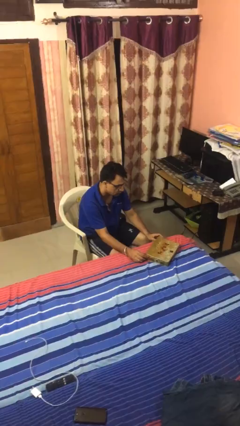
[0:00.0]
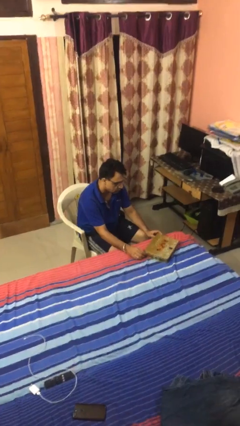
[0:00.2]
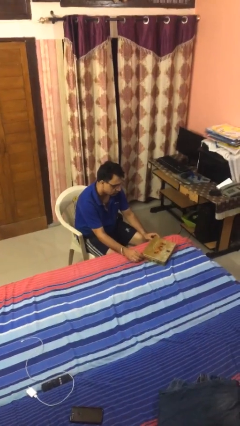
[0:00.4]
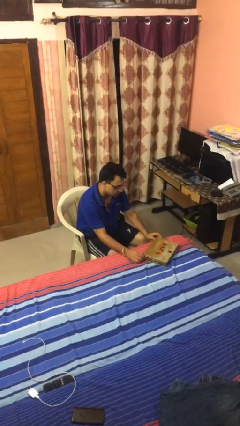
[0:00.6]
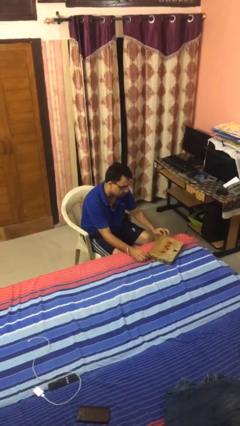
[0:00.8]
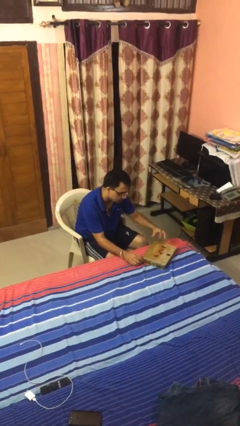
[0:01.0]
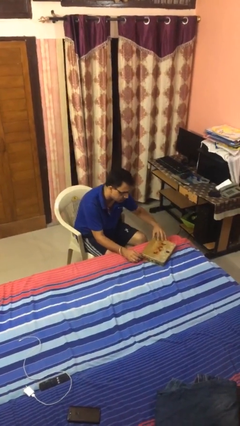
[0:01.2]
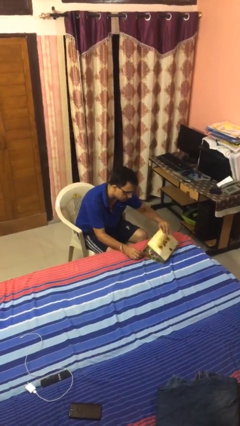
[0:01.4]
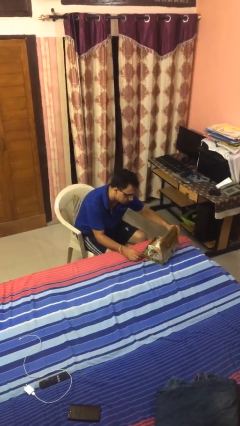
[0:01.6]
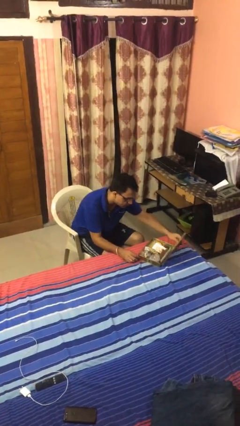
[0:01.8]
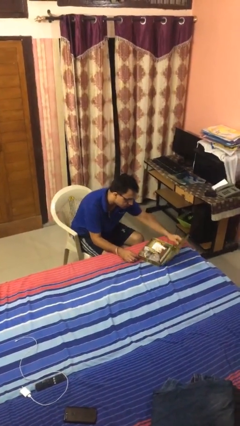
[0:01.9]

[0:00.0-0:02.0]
person opens jewelry box

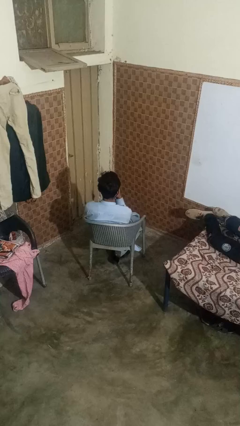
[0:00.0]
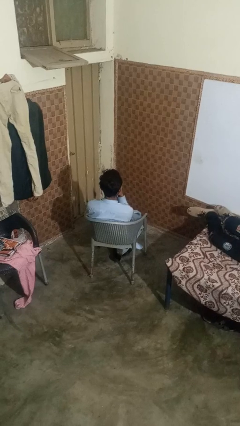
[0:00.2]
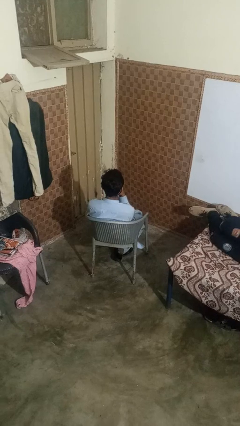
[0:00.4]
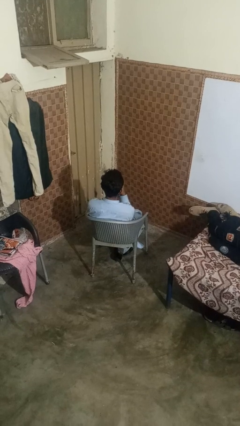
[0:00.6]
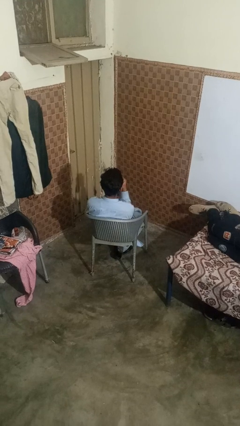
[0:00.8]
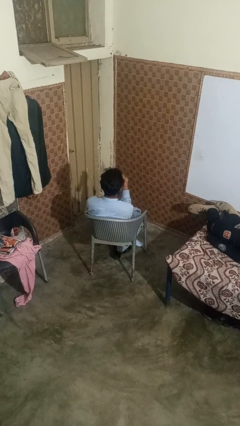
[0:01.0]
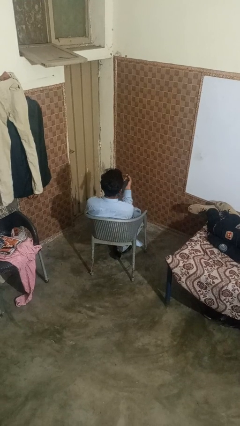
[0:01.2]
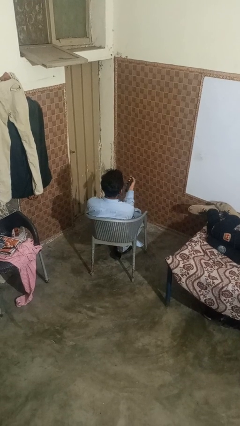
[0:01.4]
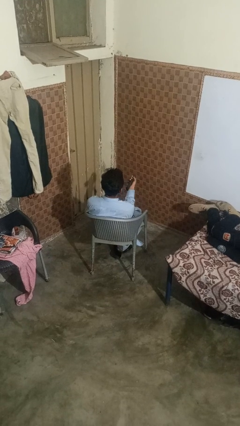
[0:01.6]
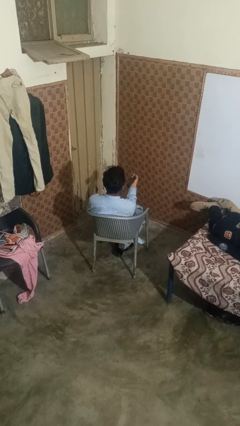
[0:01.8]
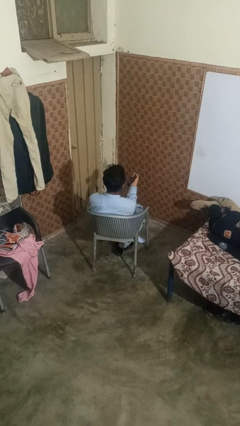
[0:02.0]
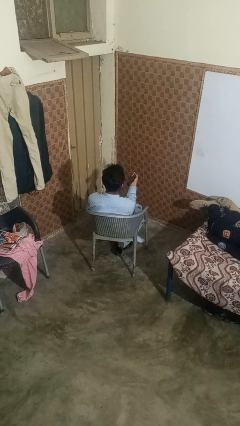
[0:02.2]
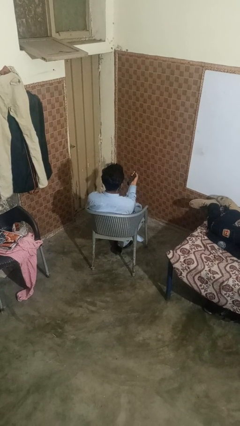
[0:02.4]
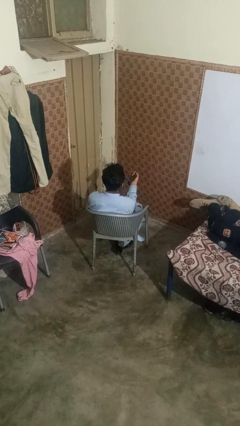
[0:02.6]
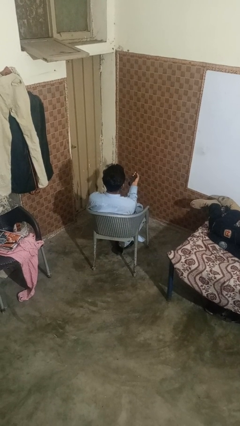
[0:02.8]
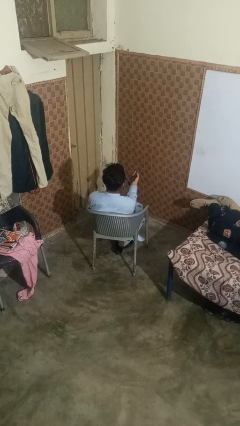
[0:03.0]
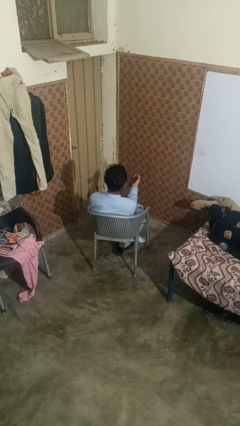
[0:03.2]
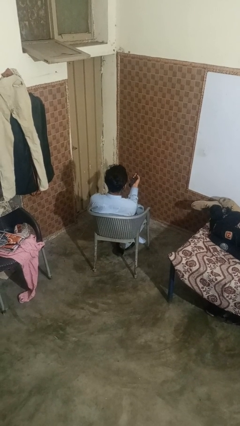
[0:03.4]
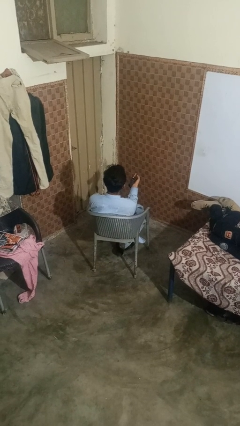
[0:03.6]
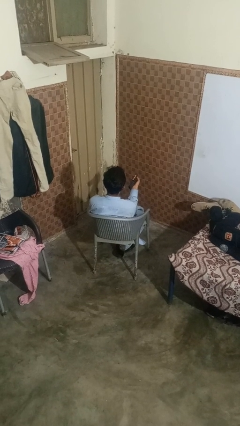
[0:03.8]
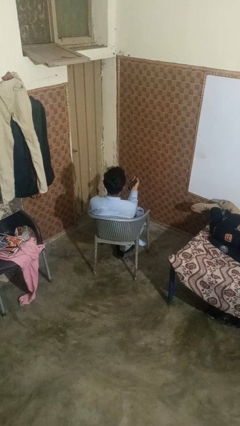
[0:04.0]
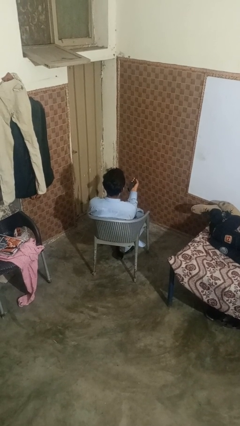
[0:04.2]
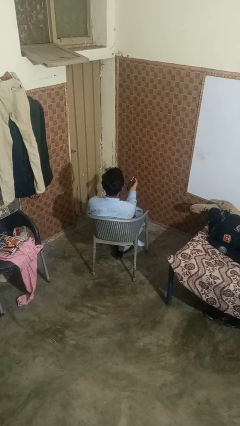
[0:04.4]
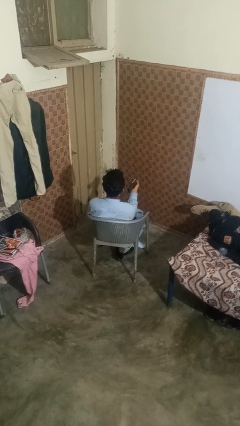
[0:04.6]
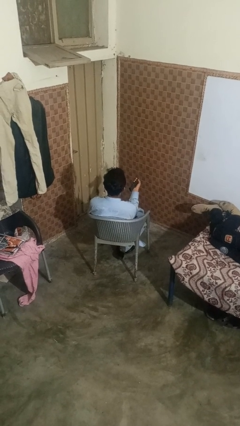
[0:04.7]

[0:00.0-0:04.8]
person uses television remote

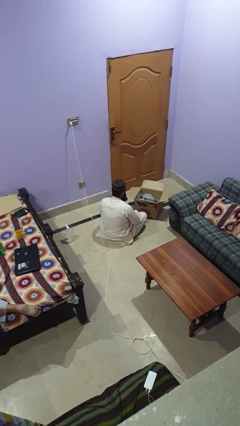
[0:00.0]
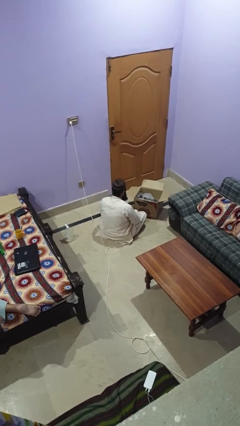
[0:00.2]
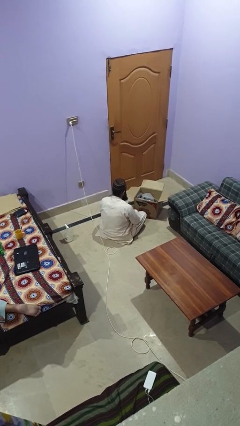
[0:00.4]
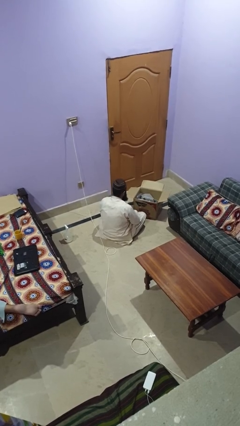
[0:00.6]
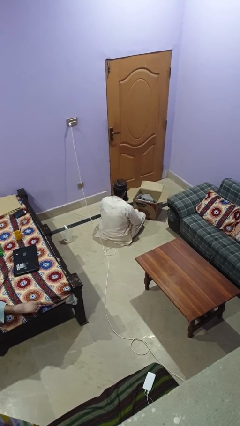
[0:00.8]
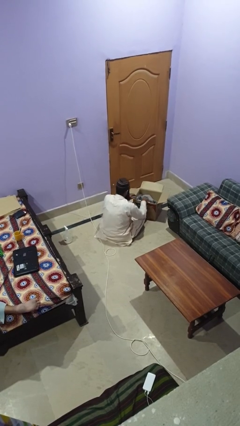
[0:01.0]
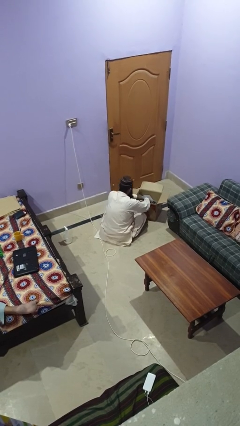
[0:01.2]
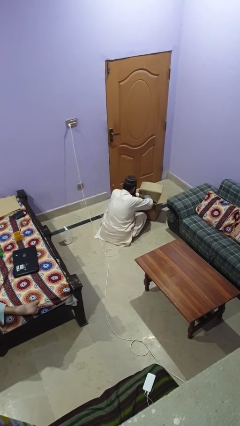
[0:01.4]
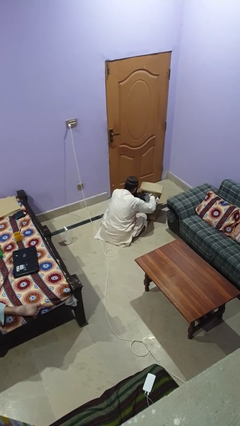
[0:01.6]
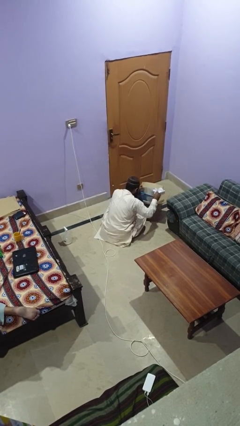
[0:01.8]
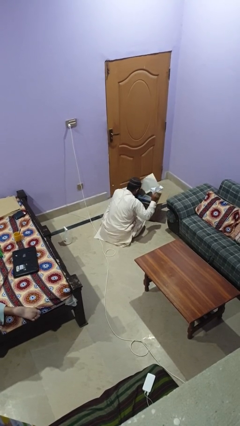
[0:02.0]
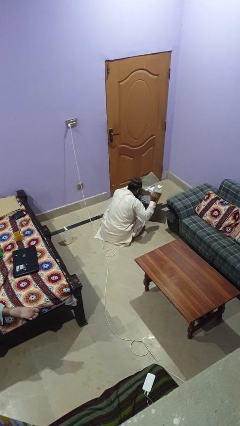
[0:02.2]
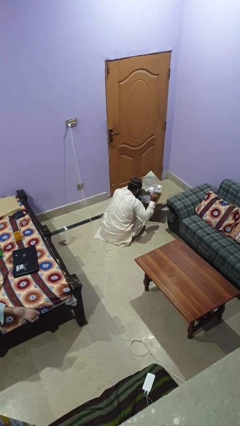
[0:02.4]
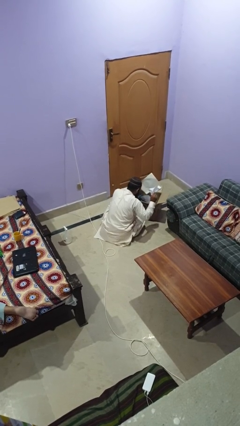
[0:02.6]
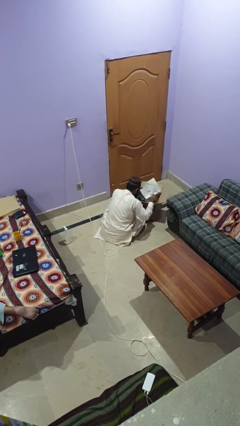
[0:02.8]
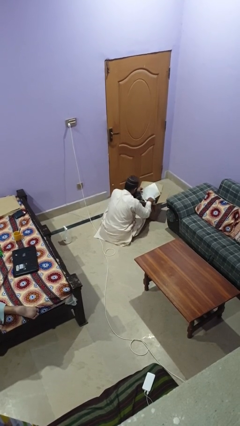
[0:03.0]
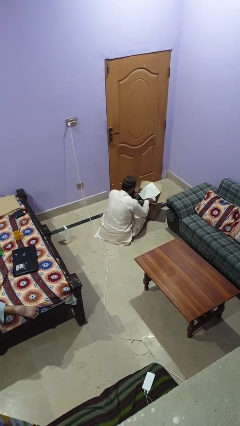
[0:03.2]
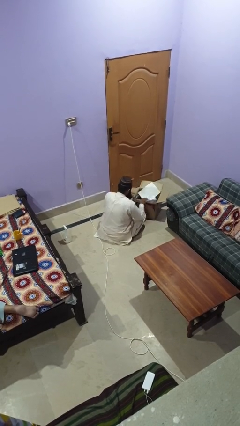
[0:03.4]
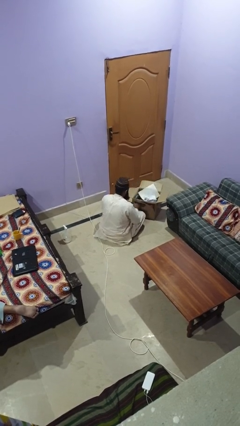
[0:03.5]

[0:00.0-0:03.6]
person searches in box

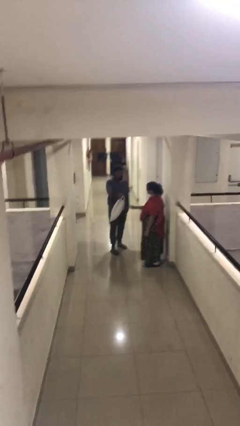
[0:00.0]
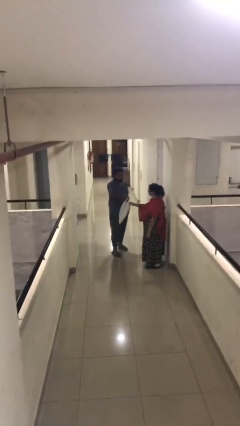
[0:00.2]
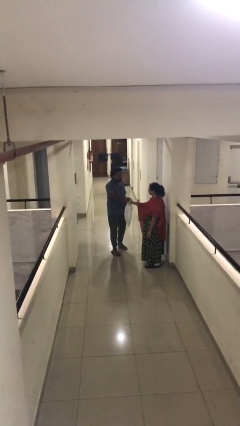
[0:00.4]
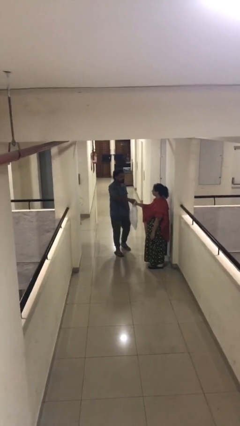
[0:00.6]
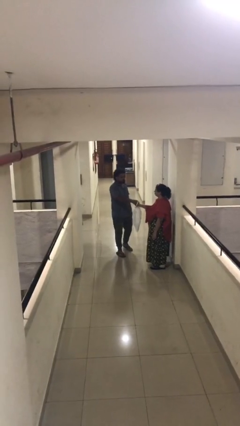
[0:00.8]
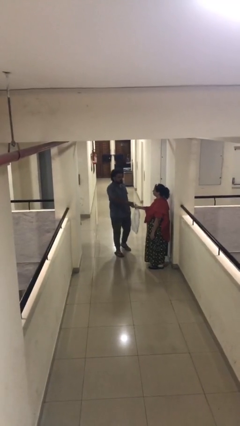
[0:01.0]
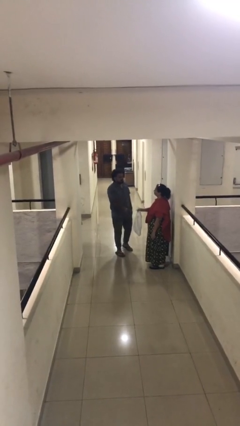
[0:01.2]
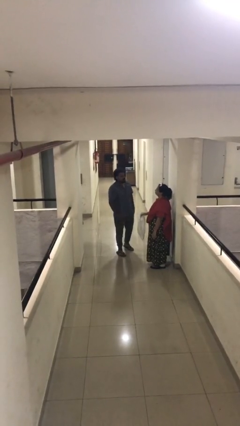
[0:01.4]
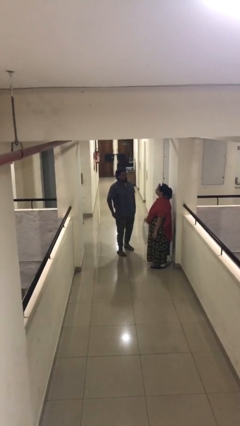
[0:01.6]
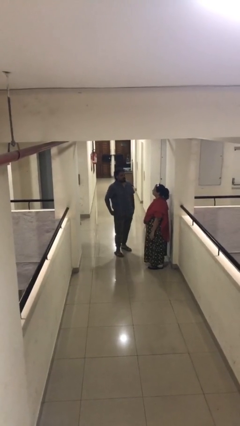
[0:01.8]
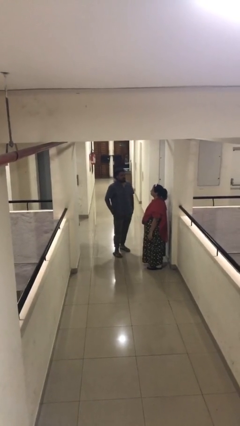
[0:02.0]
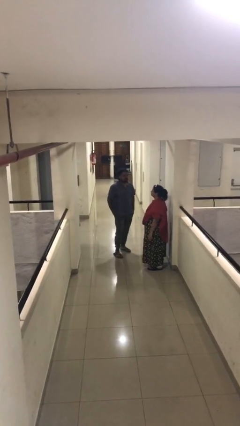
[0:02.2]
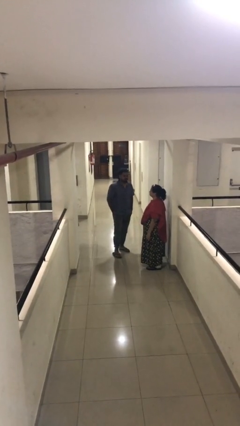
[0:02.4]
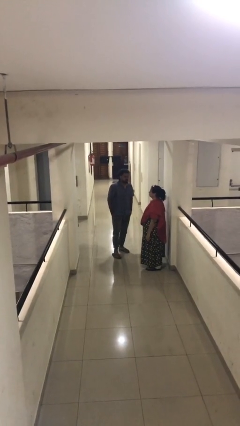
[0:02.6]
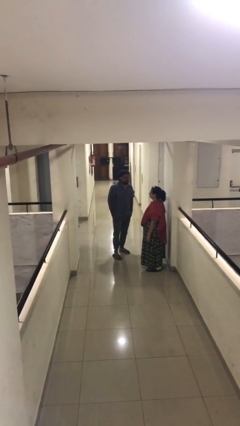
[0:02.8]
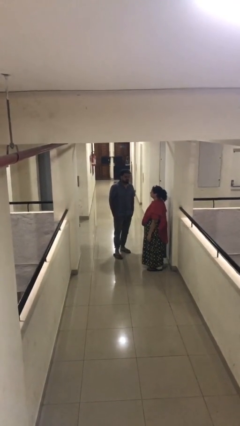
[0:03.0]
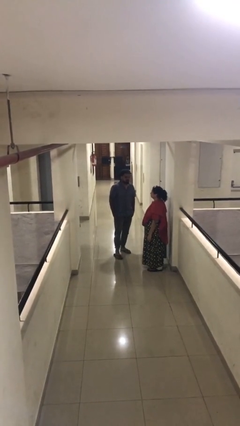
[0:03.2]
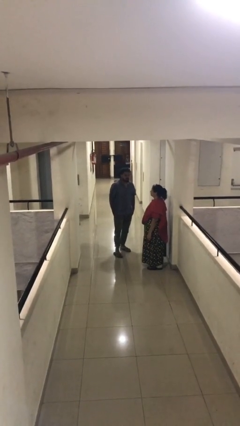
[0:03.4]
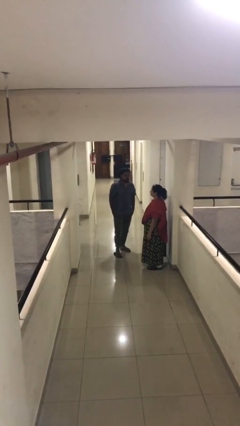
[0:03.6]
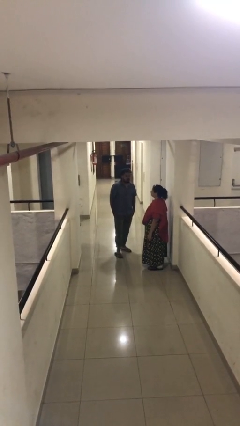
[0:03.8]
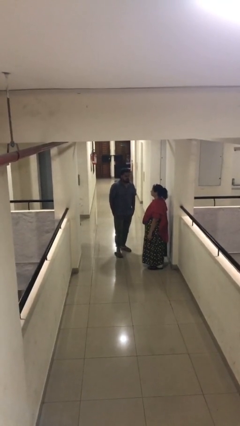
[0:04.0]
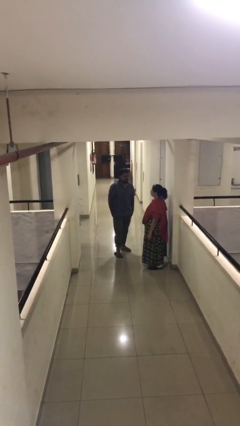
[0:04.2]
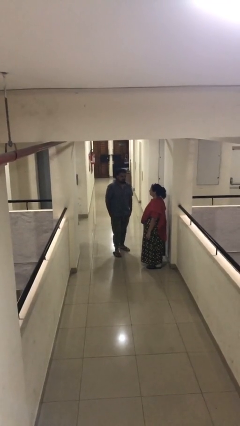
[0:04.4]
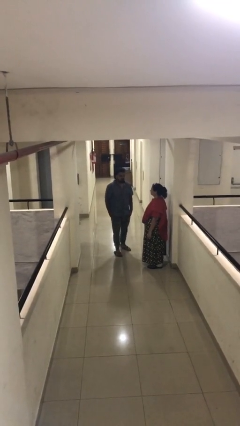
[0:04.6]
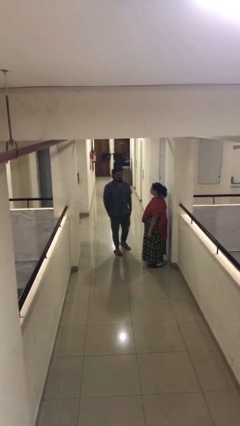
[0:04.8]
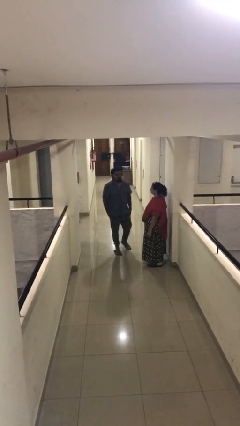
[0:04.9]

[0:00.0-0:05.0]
person transfers object to person

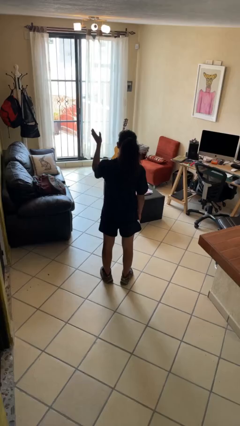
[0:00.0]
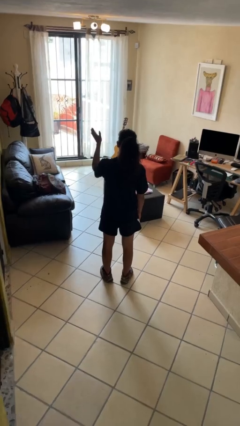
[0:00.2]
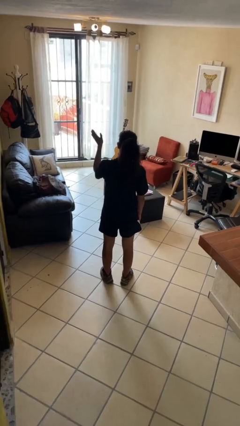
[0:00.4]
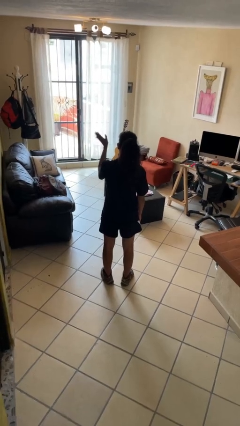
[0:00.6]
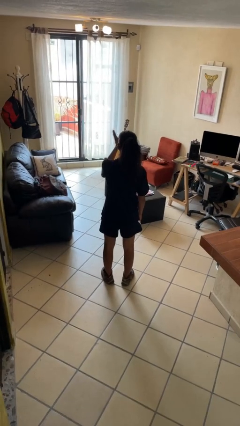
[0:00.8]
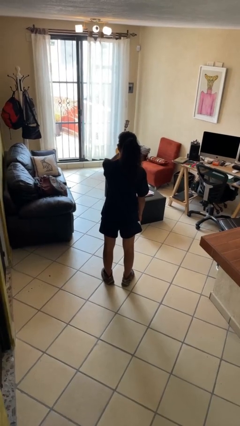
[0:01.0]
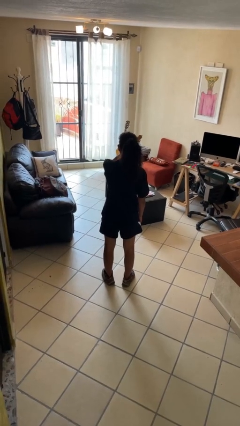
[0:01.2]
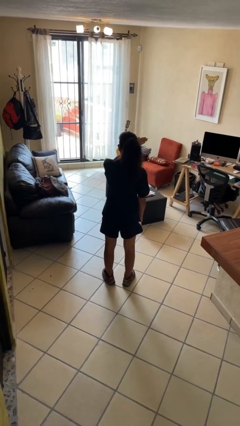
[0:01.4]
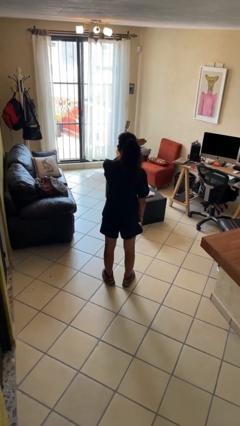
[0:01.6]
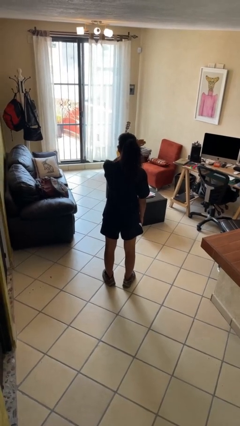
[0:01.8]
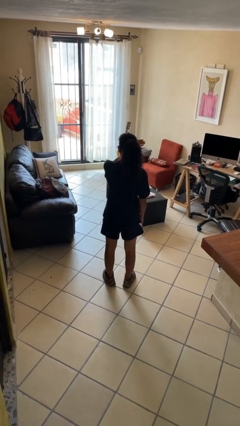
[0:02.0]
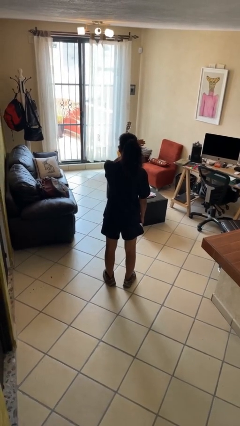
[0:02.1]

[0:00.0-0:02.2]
person gestures swipe right

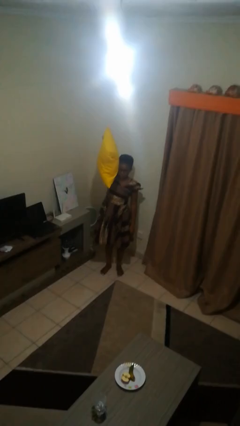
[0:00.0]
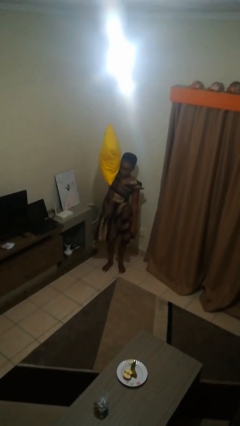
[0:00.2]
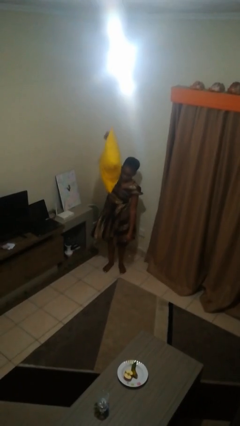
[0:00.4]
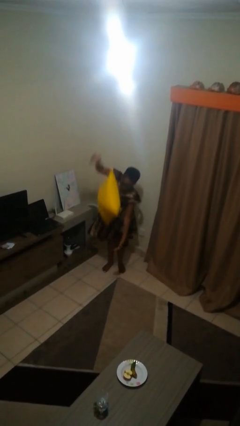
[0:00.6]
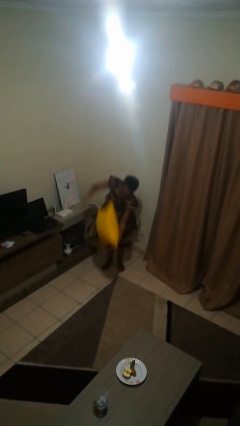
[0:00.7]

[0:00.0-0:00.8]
person drops object
